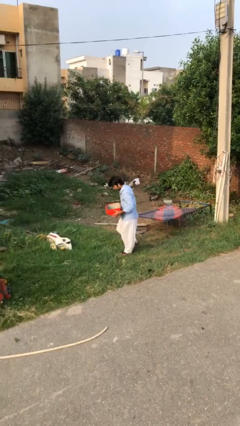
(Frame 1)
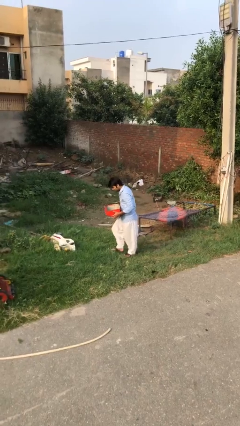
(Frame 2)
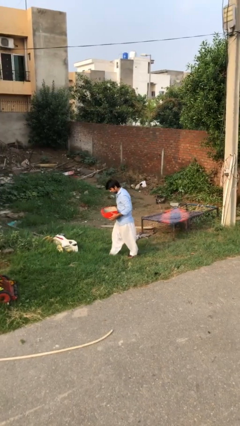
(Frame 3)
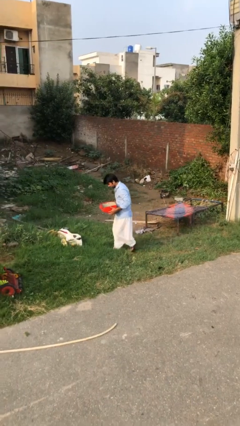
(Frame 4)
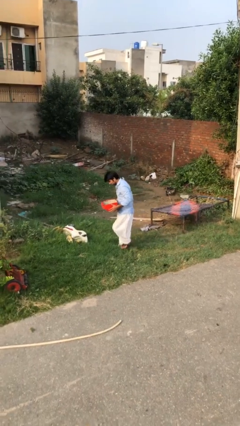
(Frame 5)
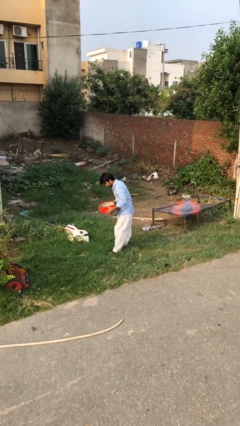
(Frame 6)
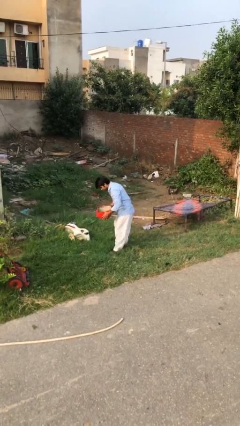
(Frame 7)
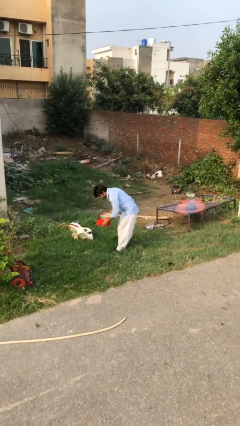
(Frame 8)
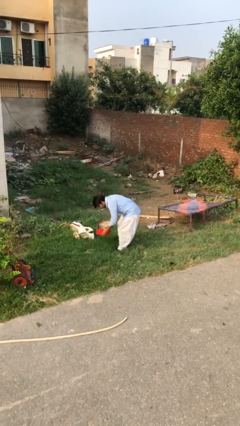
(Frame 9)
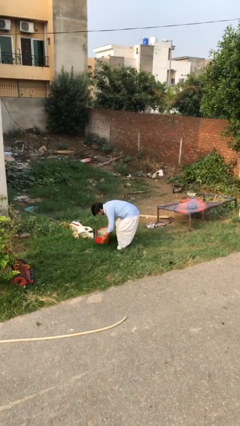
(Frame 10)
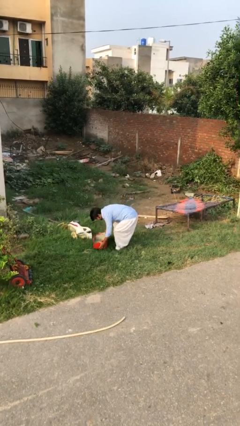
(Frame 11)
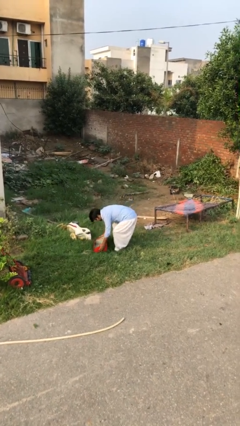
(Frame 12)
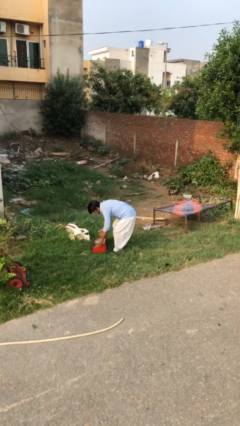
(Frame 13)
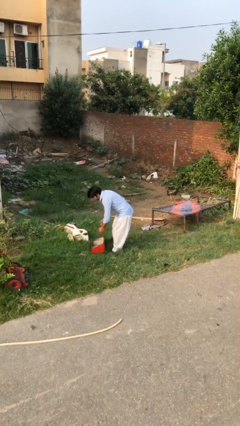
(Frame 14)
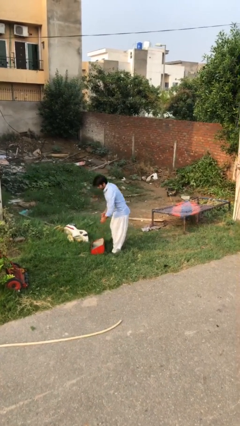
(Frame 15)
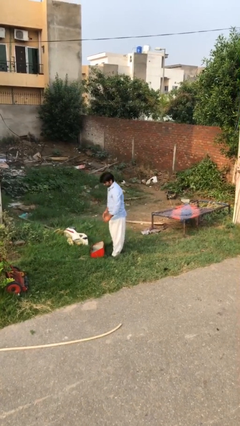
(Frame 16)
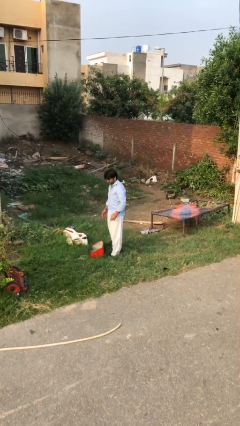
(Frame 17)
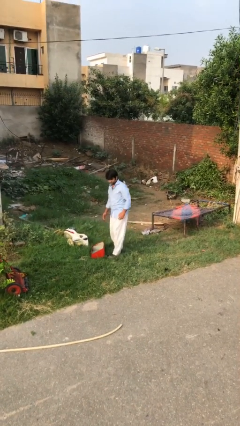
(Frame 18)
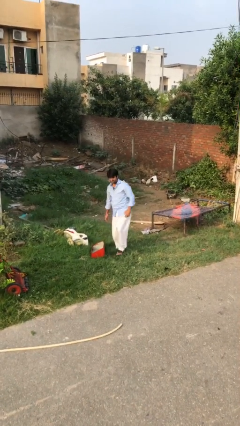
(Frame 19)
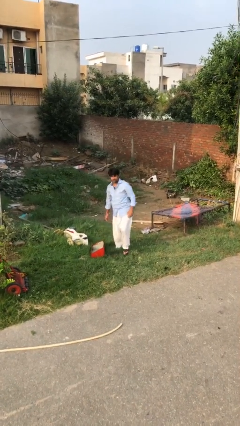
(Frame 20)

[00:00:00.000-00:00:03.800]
person puts down object on floor

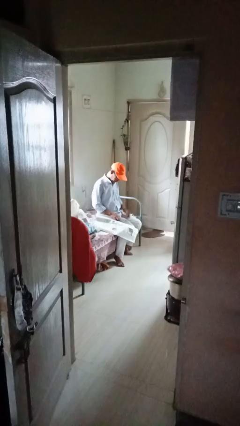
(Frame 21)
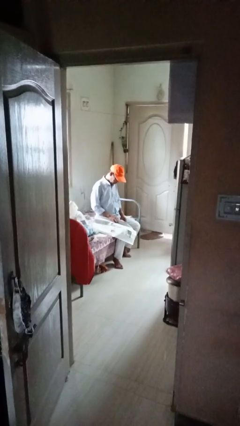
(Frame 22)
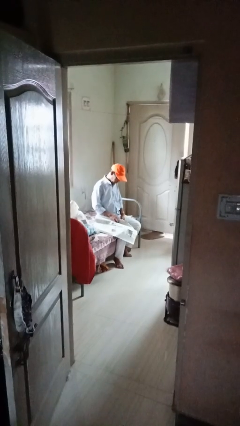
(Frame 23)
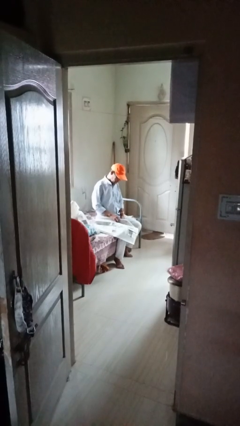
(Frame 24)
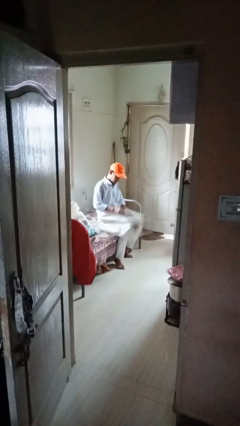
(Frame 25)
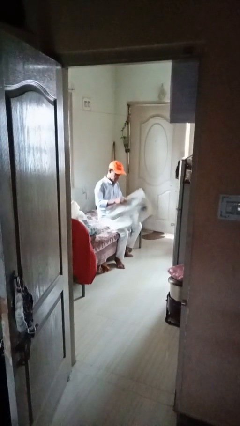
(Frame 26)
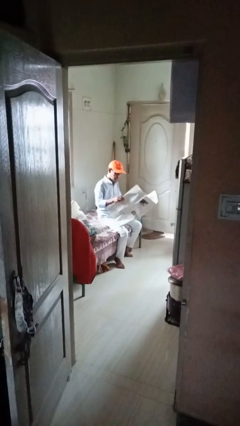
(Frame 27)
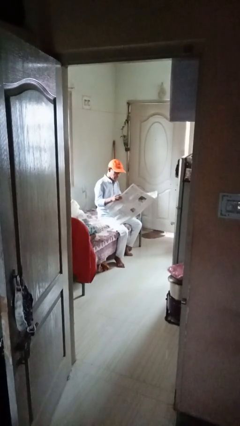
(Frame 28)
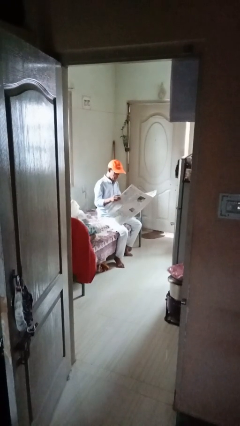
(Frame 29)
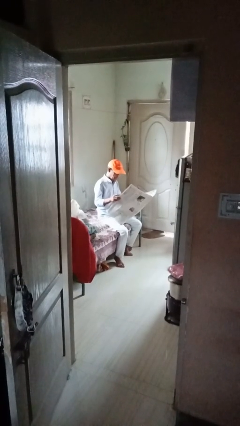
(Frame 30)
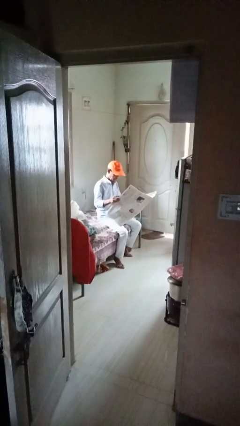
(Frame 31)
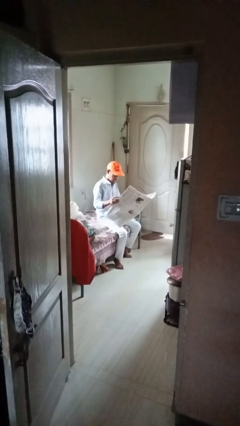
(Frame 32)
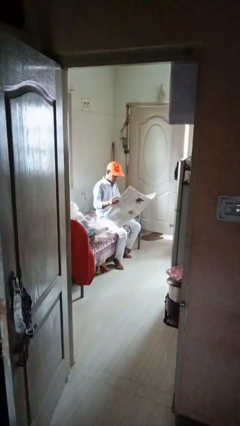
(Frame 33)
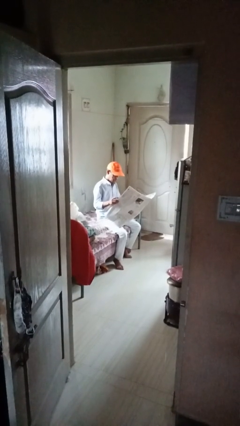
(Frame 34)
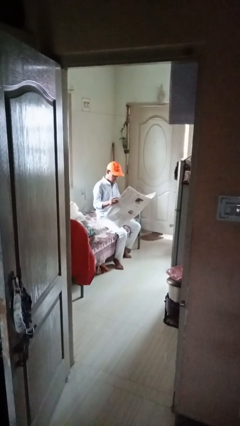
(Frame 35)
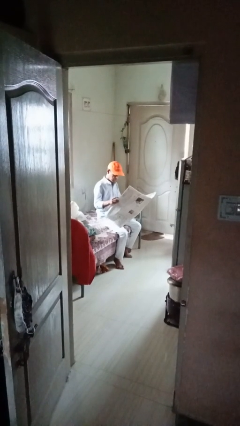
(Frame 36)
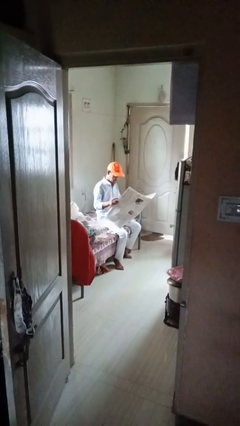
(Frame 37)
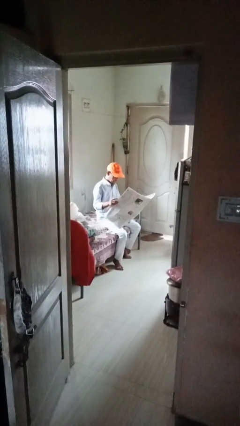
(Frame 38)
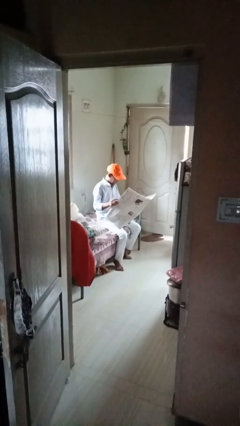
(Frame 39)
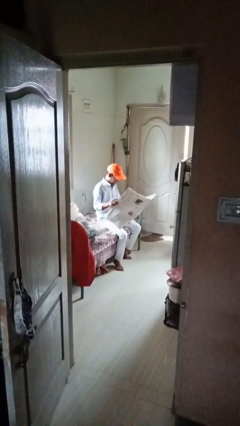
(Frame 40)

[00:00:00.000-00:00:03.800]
person reads newspaper

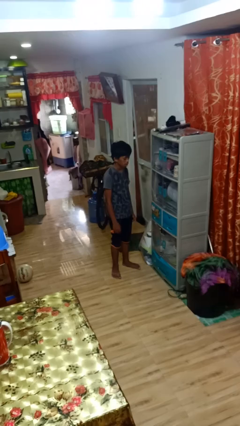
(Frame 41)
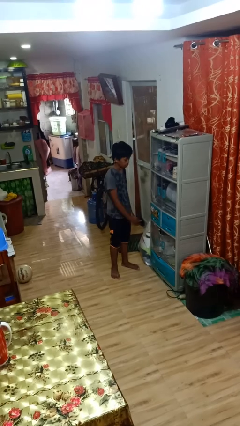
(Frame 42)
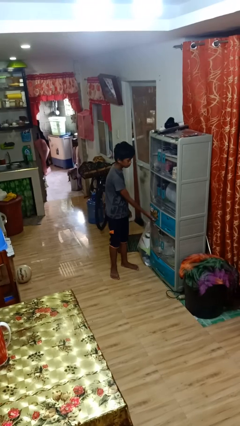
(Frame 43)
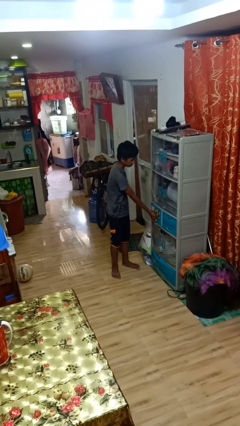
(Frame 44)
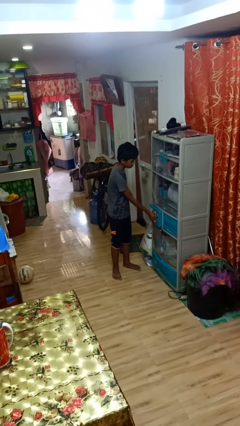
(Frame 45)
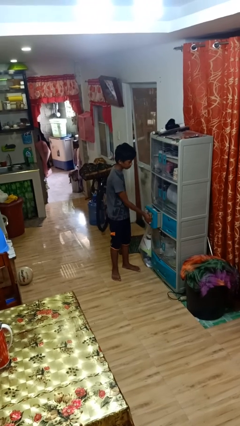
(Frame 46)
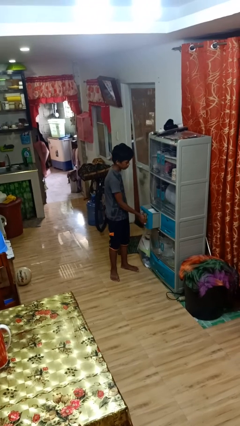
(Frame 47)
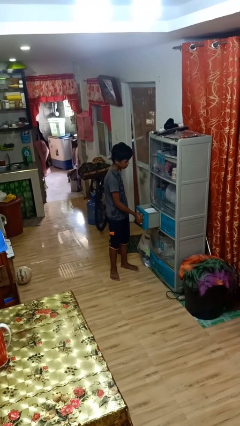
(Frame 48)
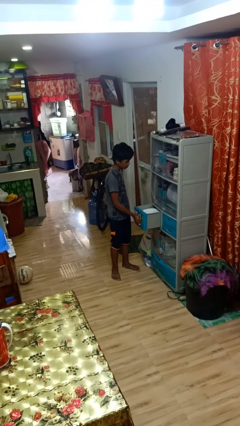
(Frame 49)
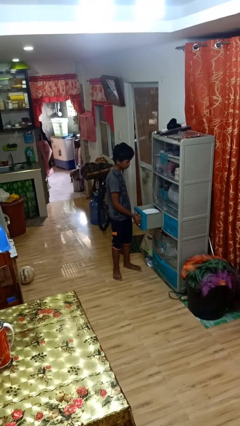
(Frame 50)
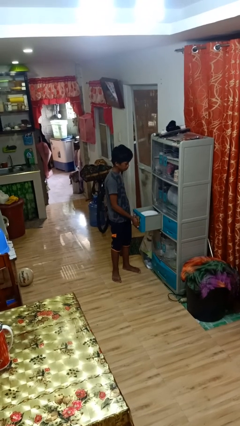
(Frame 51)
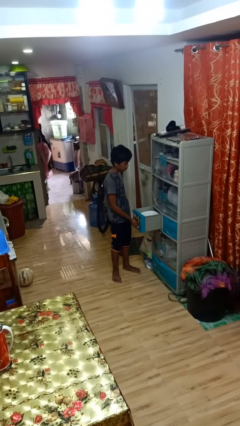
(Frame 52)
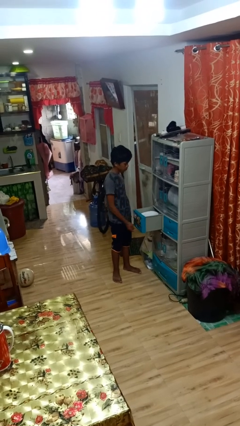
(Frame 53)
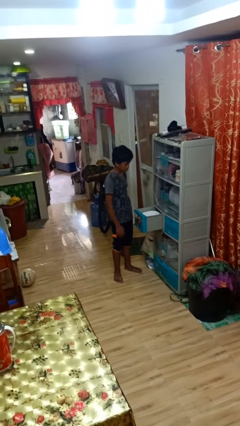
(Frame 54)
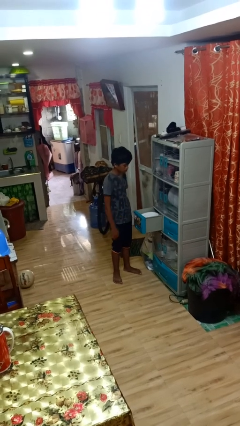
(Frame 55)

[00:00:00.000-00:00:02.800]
person opens kitchen drawer

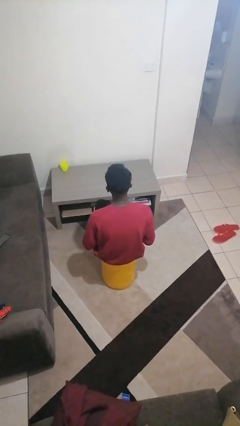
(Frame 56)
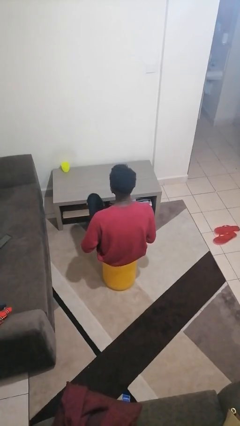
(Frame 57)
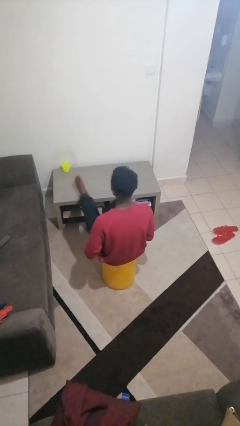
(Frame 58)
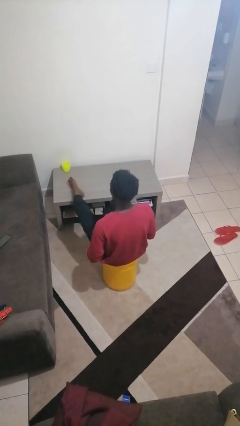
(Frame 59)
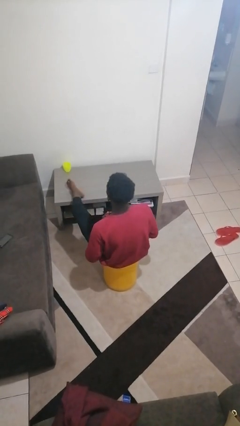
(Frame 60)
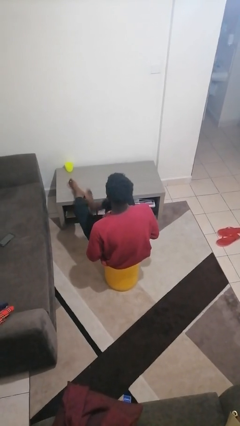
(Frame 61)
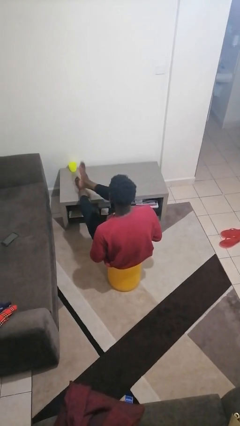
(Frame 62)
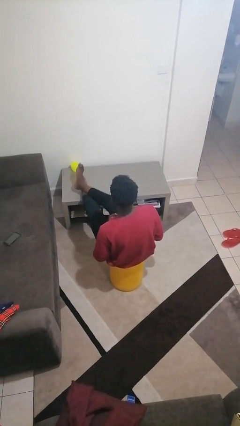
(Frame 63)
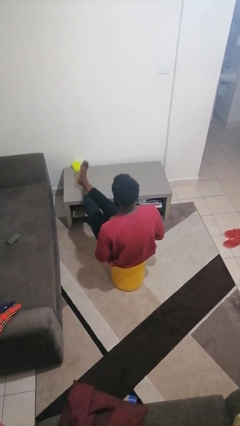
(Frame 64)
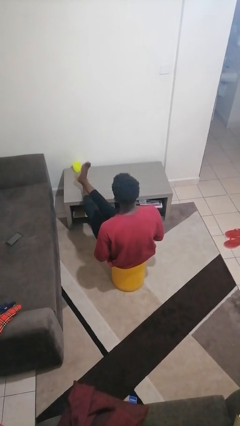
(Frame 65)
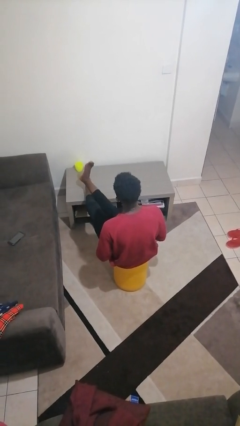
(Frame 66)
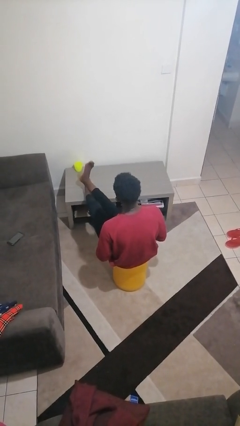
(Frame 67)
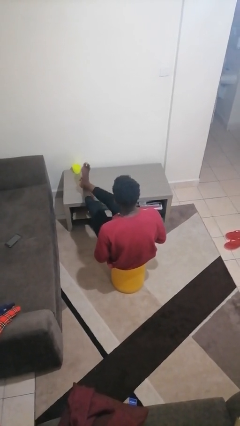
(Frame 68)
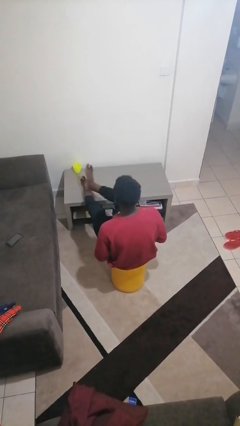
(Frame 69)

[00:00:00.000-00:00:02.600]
person puts feet up

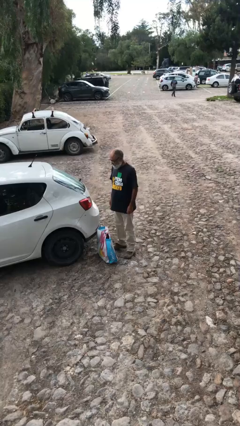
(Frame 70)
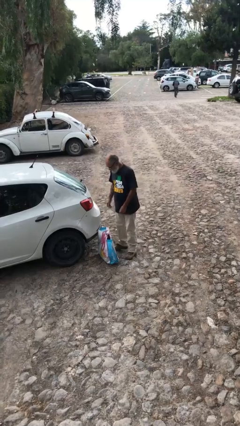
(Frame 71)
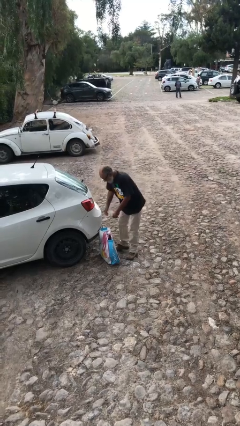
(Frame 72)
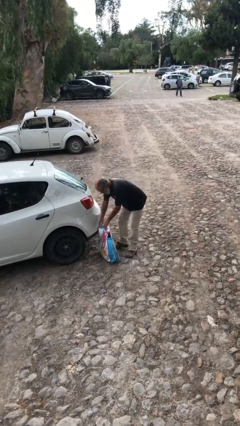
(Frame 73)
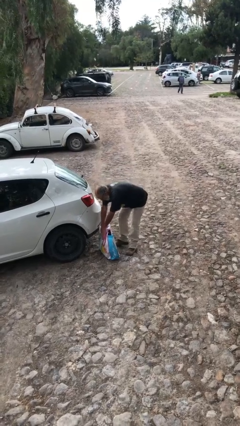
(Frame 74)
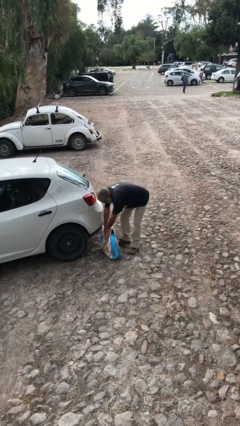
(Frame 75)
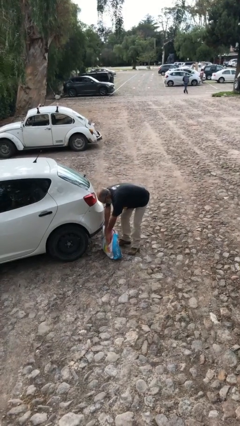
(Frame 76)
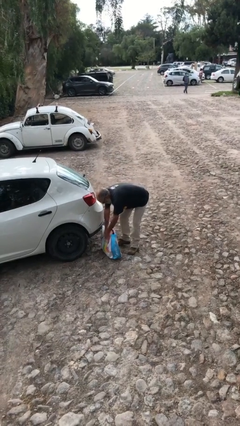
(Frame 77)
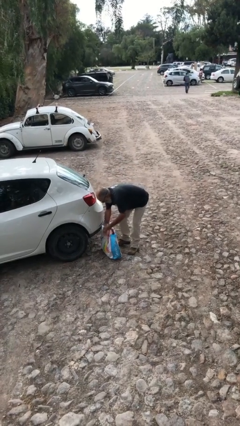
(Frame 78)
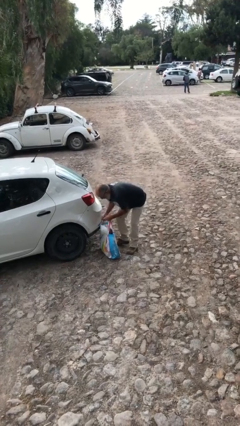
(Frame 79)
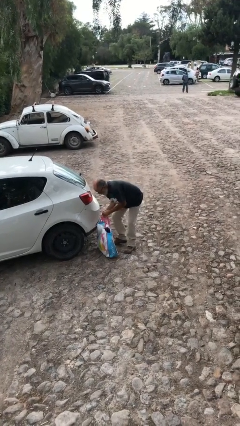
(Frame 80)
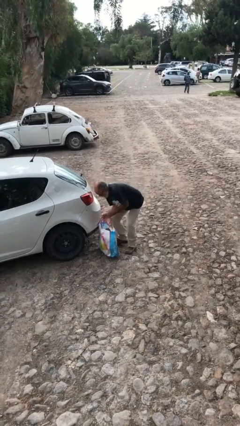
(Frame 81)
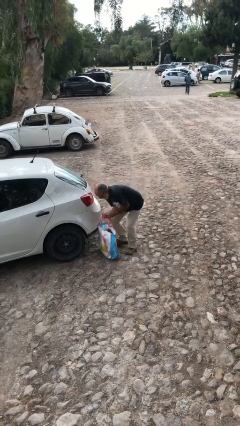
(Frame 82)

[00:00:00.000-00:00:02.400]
person picks up object from floor

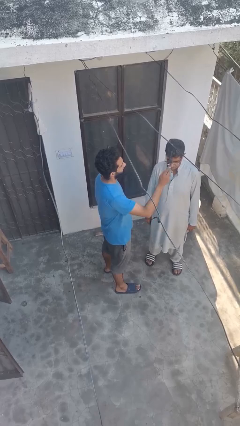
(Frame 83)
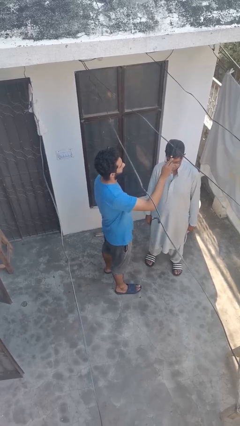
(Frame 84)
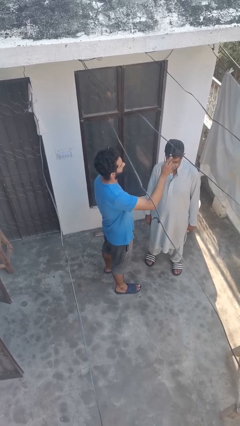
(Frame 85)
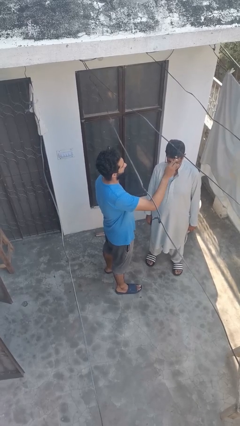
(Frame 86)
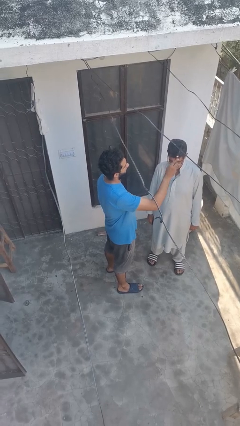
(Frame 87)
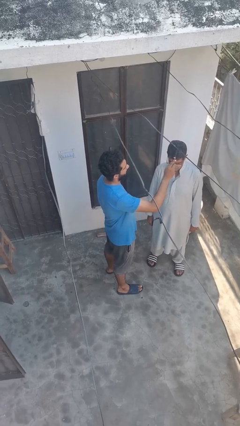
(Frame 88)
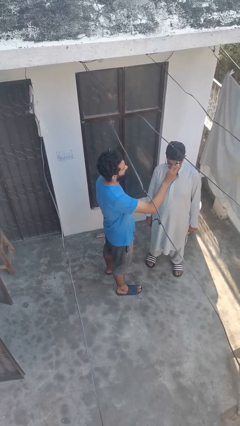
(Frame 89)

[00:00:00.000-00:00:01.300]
person brushes hair of person

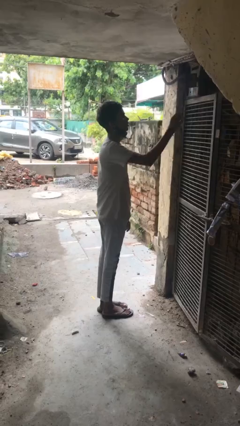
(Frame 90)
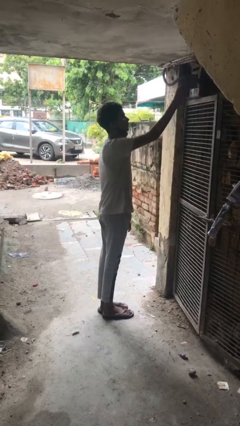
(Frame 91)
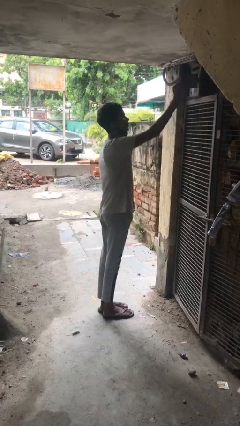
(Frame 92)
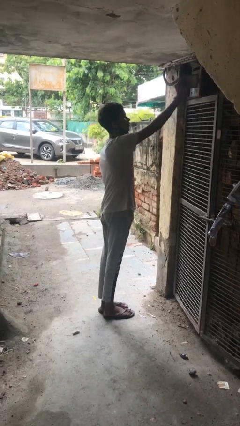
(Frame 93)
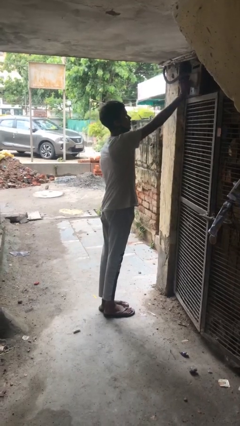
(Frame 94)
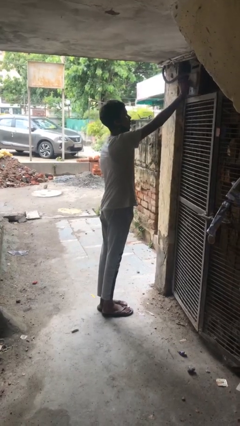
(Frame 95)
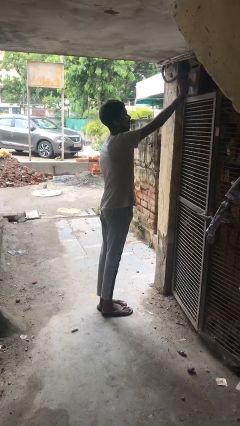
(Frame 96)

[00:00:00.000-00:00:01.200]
person closes mailbox
